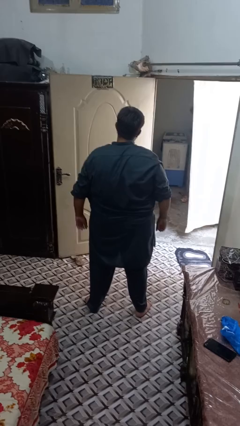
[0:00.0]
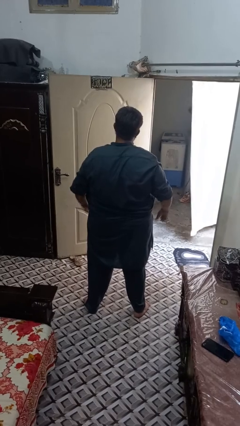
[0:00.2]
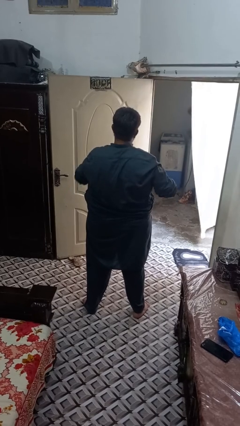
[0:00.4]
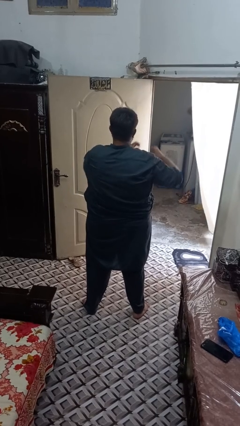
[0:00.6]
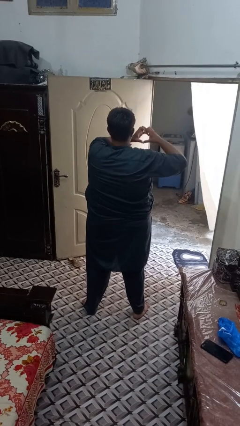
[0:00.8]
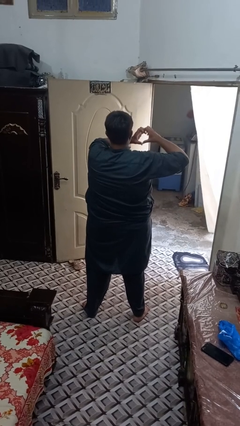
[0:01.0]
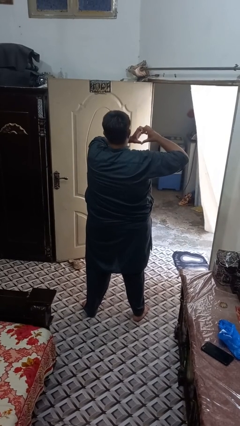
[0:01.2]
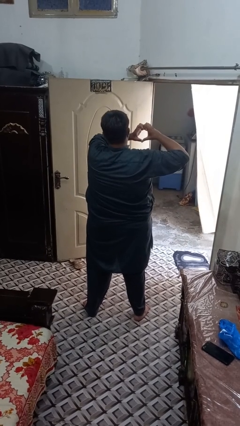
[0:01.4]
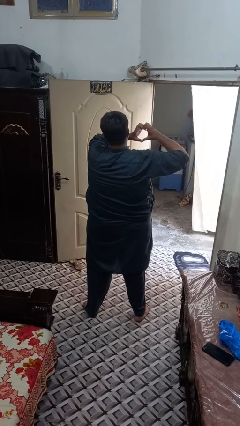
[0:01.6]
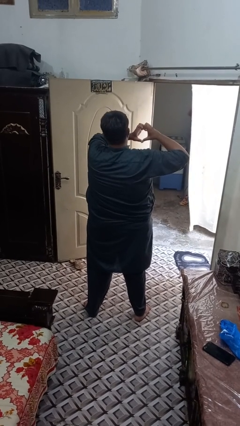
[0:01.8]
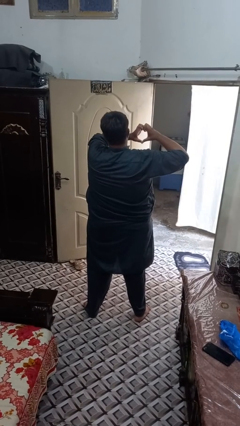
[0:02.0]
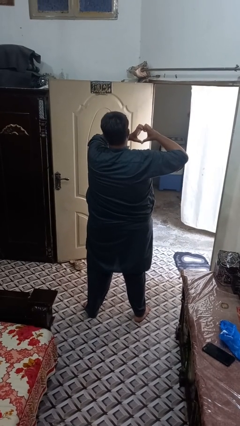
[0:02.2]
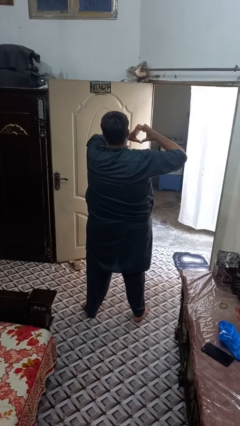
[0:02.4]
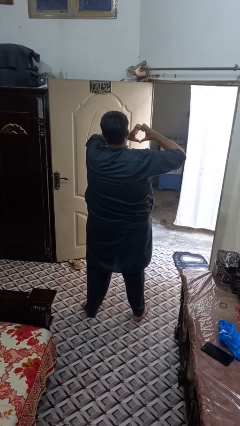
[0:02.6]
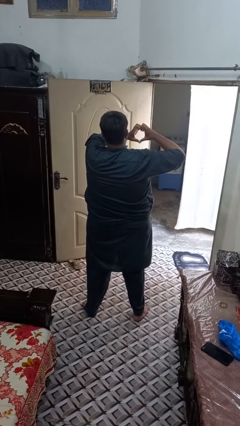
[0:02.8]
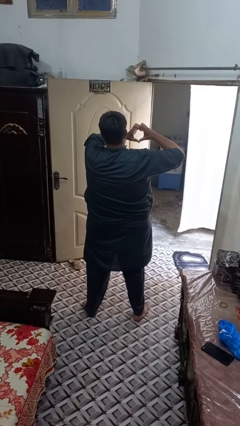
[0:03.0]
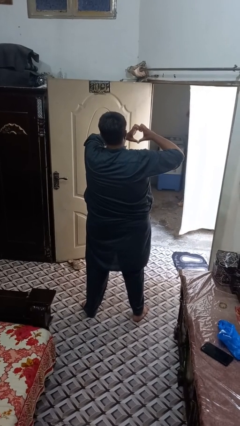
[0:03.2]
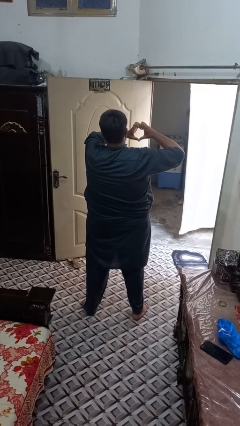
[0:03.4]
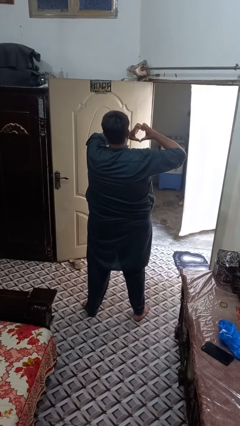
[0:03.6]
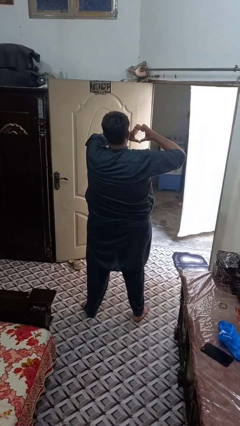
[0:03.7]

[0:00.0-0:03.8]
person gestures heart

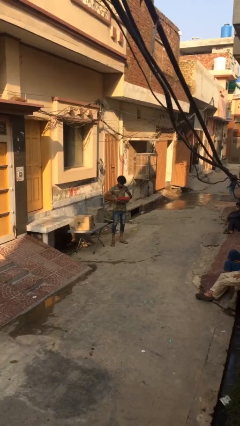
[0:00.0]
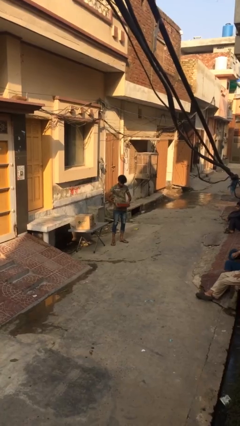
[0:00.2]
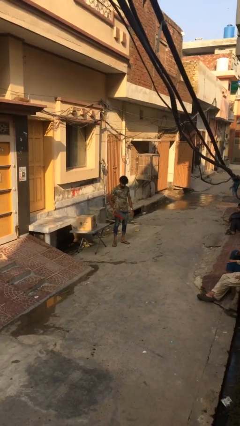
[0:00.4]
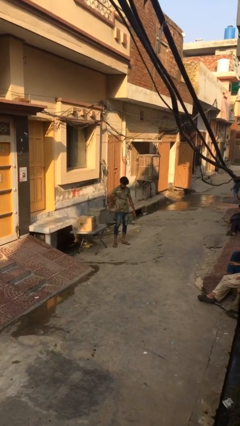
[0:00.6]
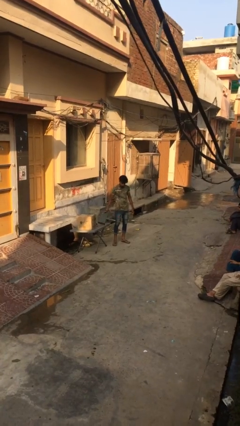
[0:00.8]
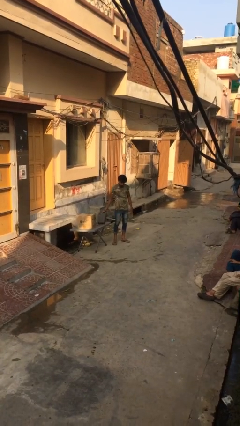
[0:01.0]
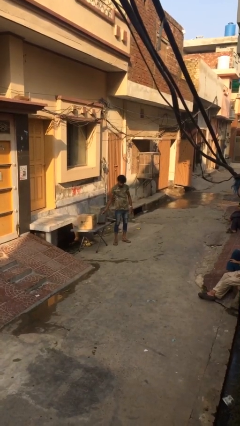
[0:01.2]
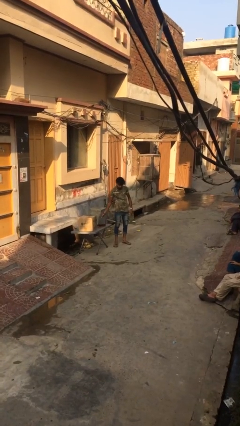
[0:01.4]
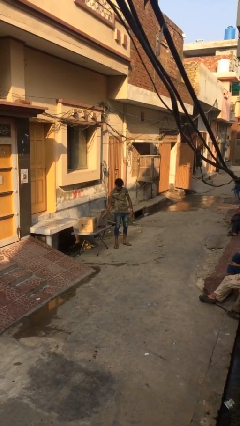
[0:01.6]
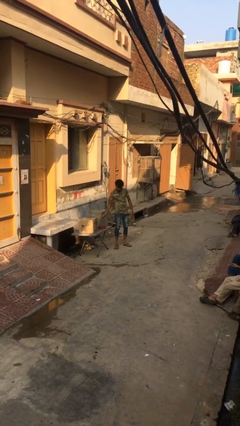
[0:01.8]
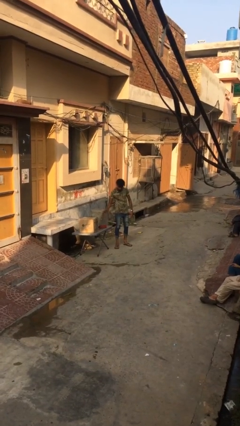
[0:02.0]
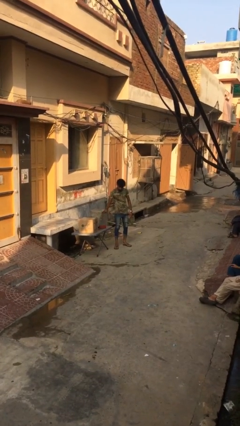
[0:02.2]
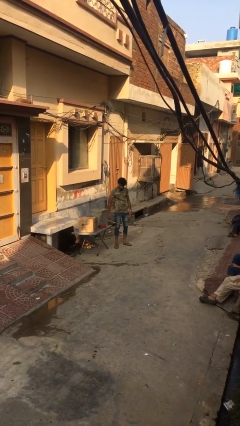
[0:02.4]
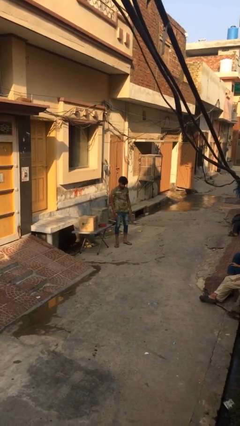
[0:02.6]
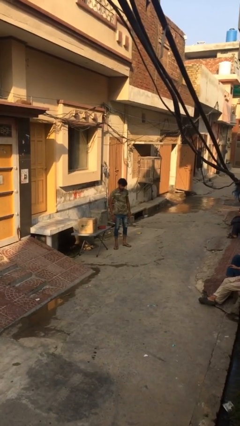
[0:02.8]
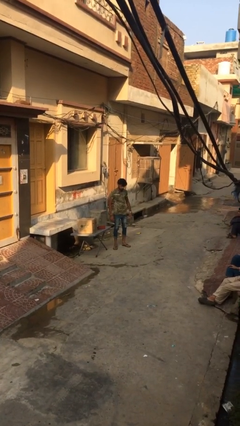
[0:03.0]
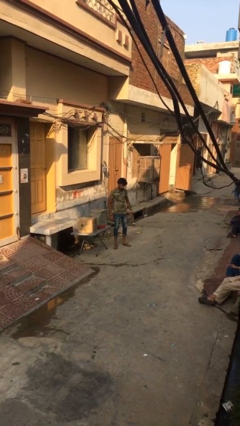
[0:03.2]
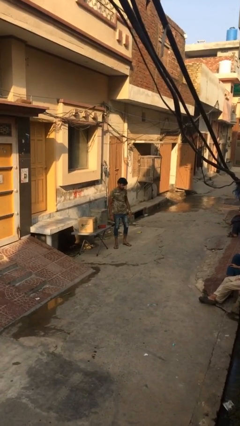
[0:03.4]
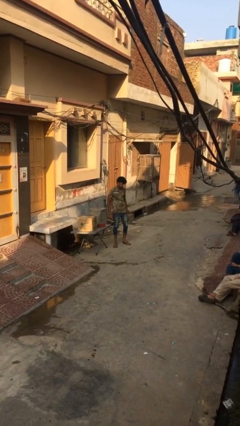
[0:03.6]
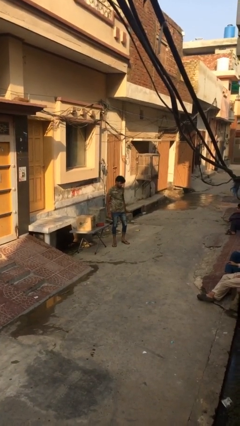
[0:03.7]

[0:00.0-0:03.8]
person puts down object on table

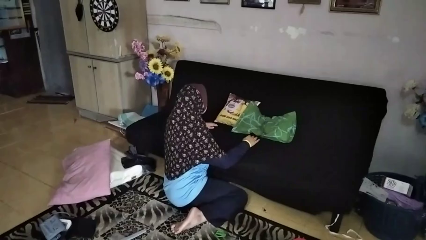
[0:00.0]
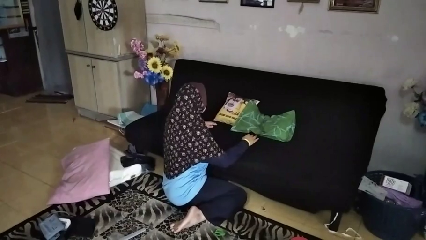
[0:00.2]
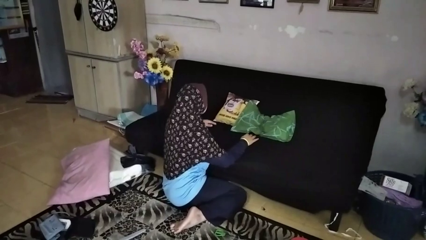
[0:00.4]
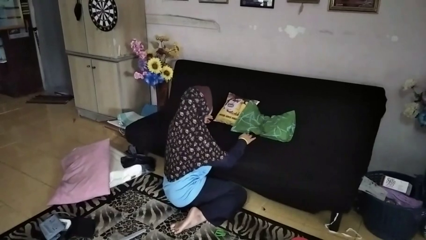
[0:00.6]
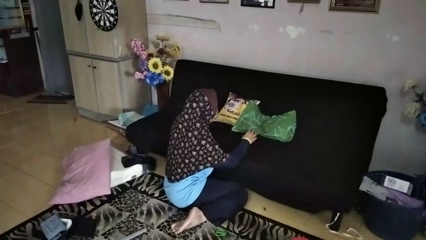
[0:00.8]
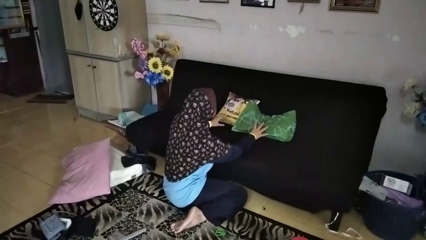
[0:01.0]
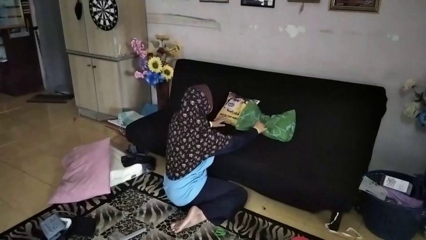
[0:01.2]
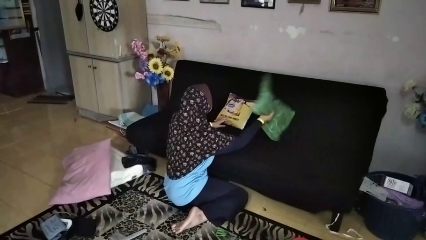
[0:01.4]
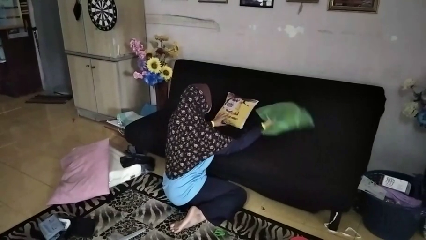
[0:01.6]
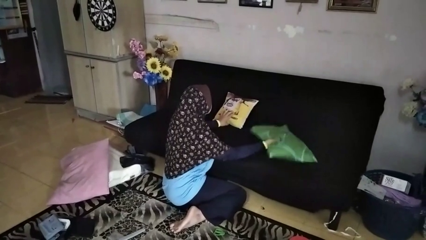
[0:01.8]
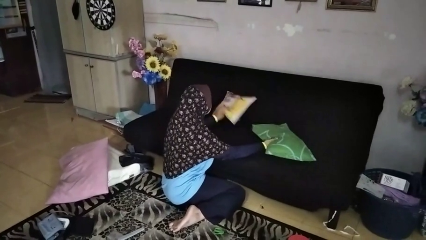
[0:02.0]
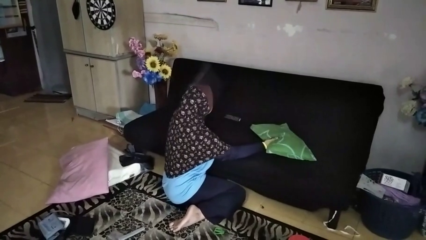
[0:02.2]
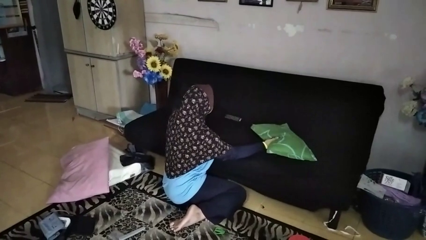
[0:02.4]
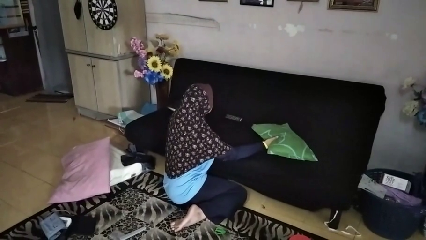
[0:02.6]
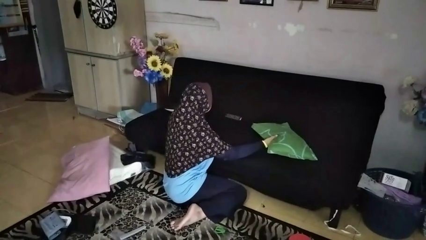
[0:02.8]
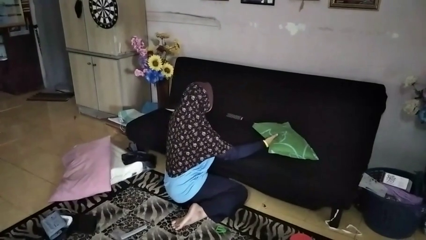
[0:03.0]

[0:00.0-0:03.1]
person searches in couch

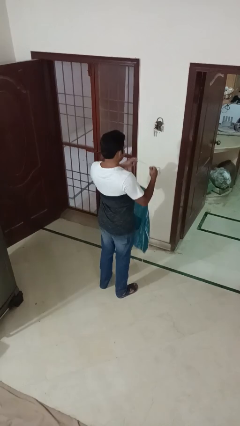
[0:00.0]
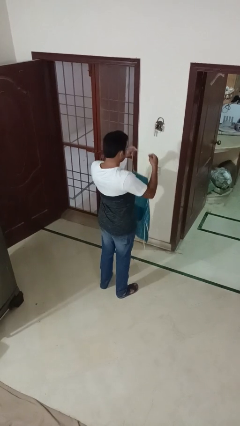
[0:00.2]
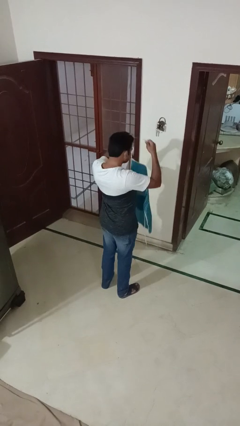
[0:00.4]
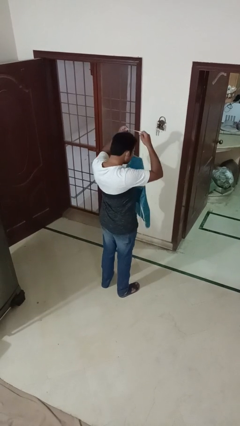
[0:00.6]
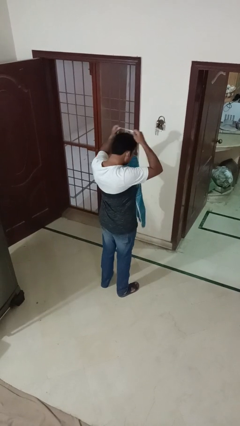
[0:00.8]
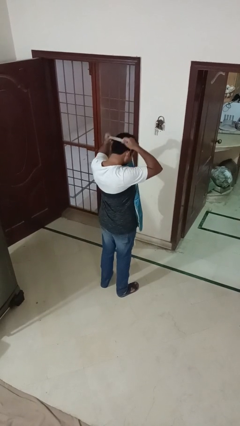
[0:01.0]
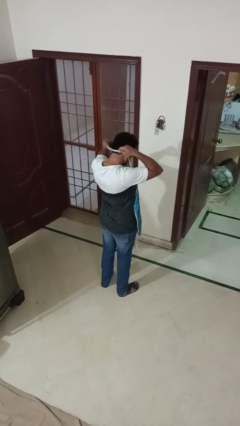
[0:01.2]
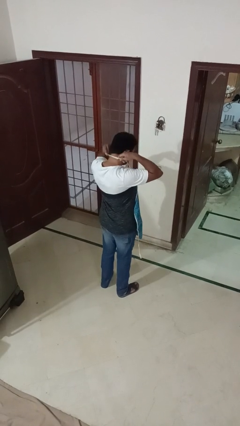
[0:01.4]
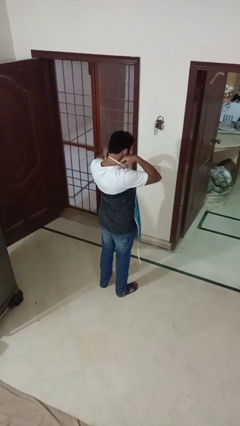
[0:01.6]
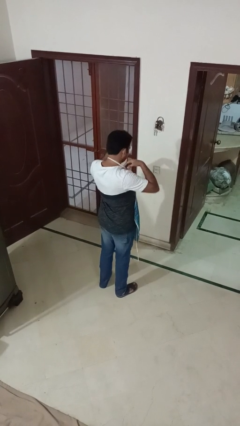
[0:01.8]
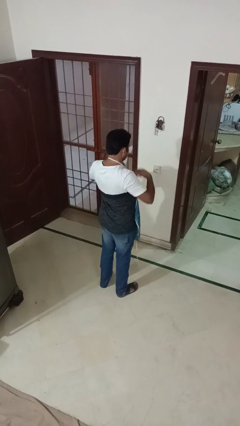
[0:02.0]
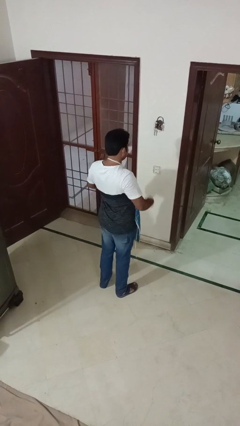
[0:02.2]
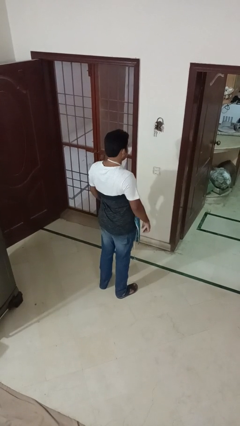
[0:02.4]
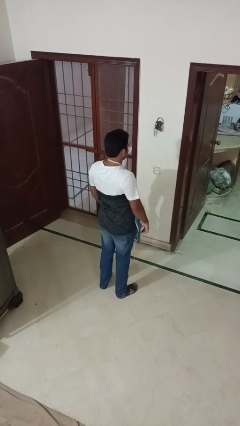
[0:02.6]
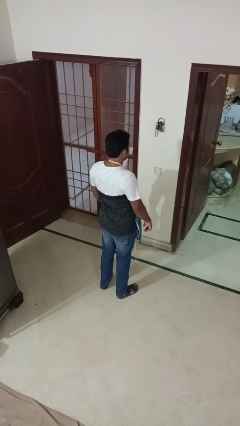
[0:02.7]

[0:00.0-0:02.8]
person puts on apron

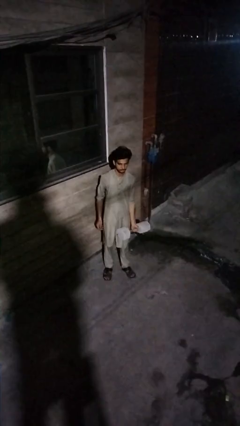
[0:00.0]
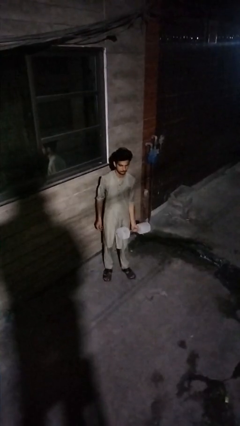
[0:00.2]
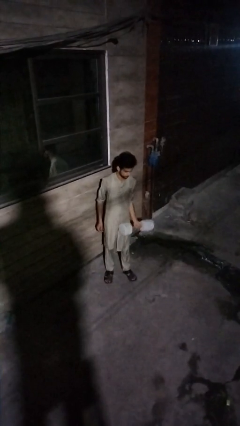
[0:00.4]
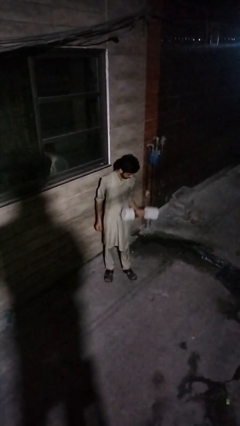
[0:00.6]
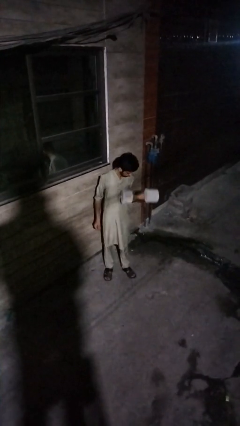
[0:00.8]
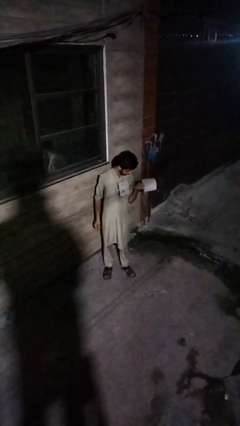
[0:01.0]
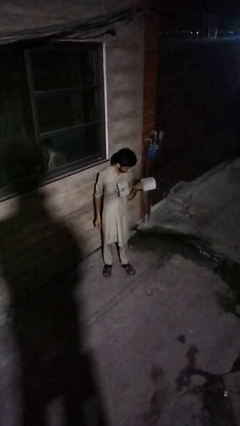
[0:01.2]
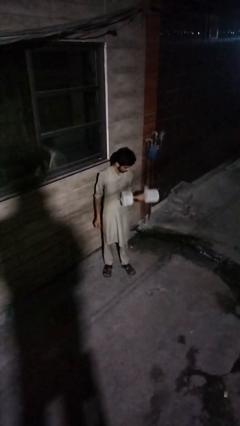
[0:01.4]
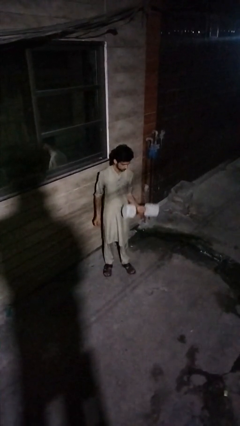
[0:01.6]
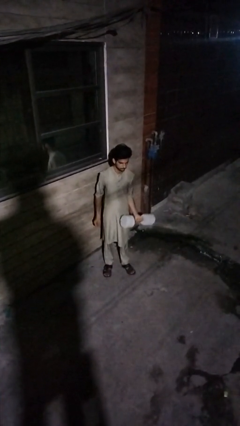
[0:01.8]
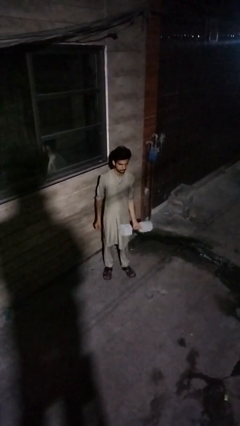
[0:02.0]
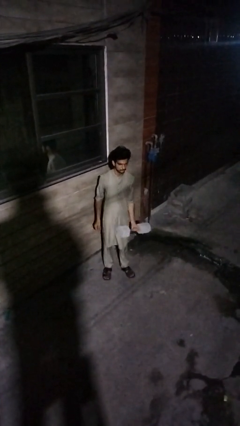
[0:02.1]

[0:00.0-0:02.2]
person lifts dumbbells

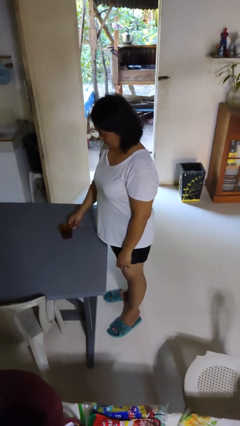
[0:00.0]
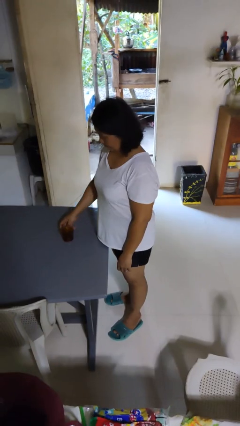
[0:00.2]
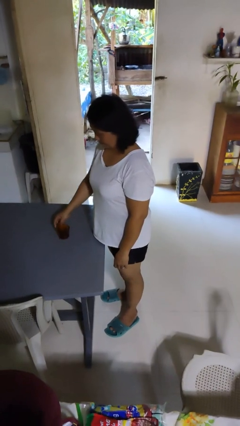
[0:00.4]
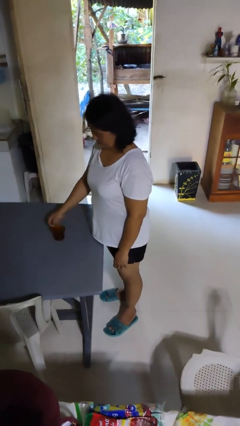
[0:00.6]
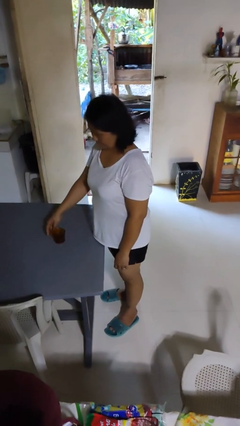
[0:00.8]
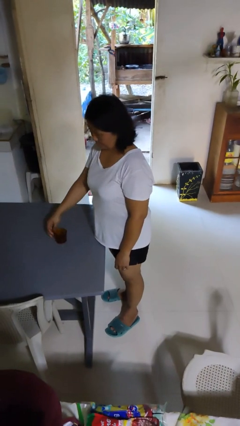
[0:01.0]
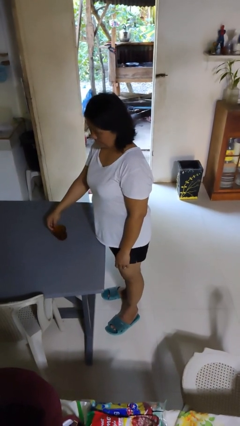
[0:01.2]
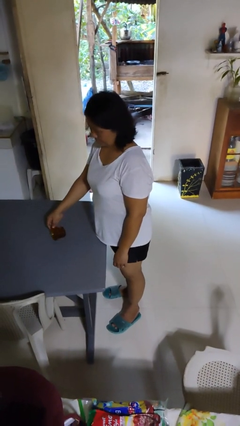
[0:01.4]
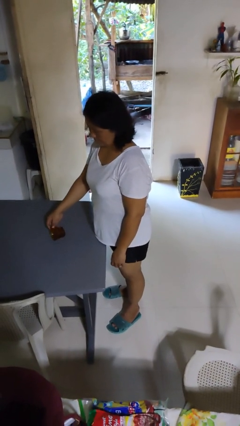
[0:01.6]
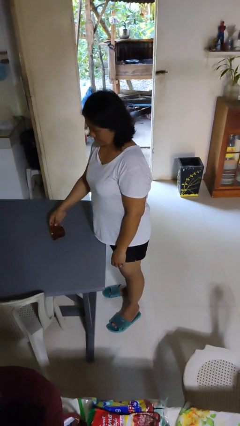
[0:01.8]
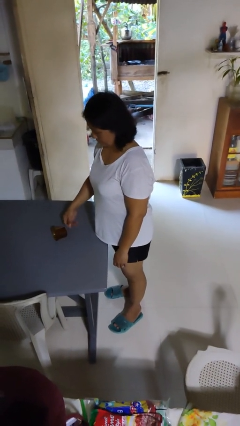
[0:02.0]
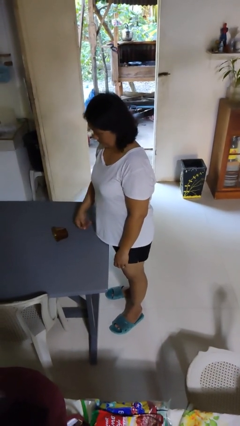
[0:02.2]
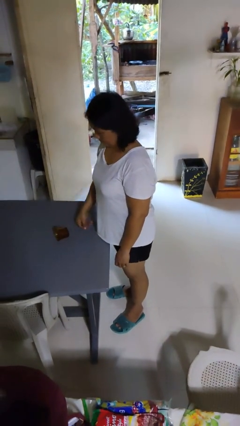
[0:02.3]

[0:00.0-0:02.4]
person knocks over glass
